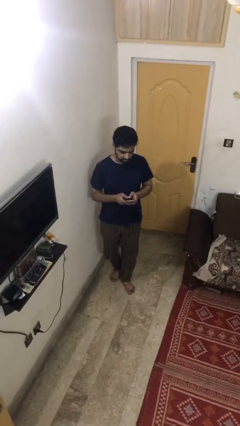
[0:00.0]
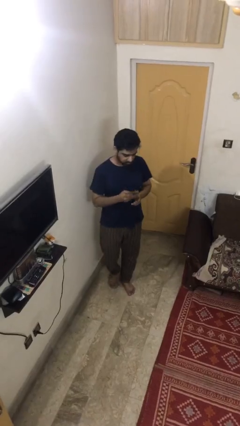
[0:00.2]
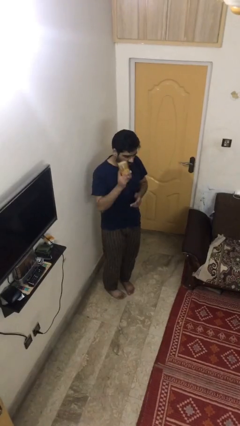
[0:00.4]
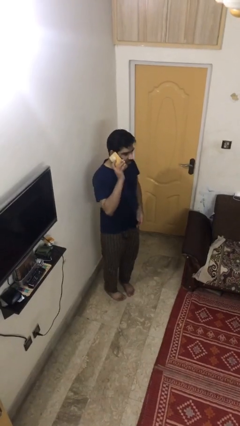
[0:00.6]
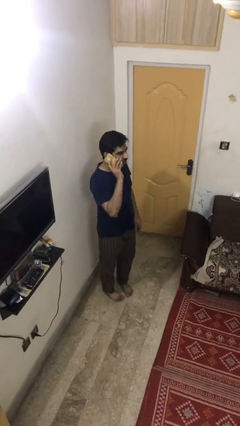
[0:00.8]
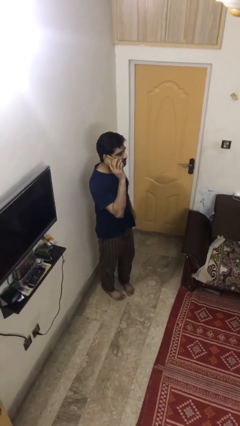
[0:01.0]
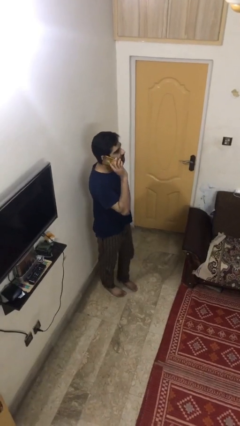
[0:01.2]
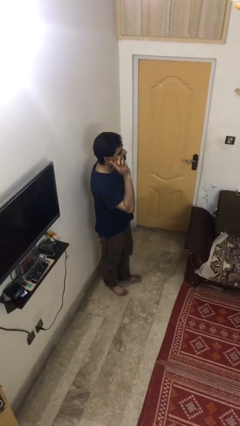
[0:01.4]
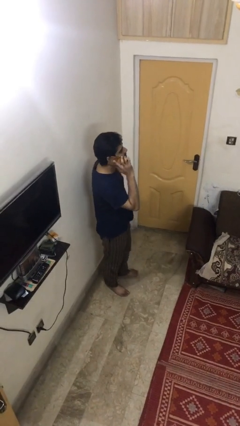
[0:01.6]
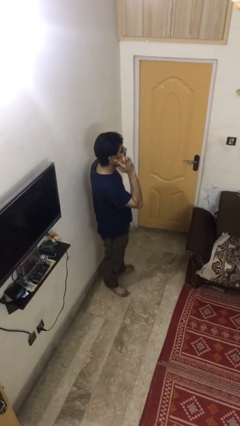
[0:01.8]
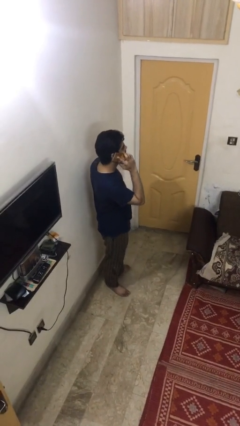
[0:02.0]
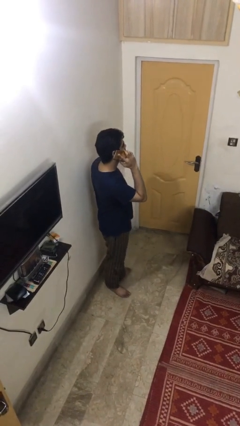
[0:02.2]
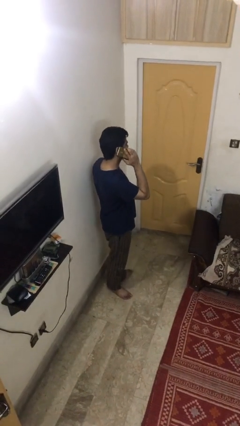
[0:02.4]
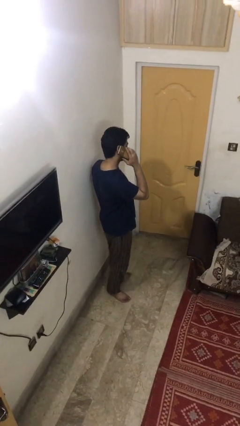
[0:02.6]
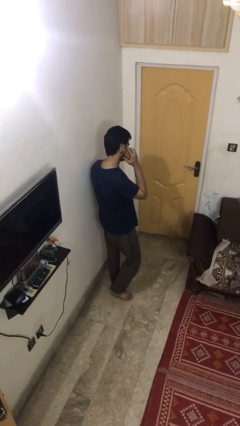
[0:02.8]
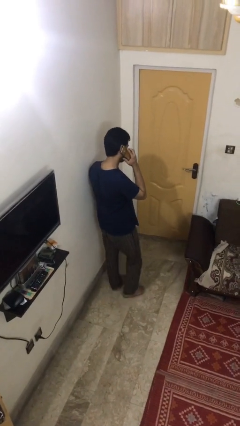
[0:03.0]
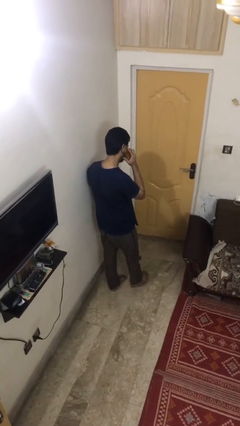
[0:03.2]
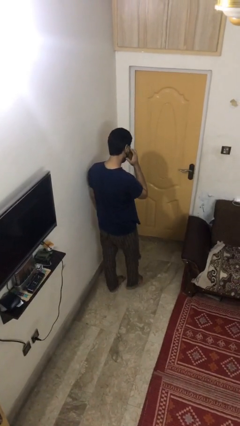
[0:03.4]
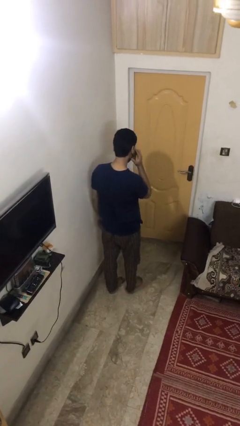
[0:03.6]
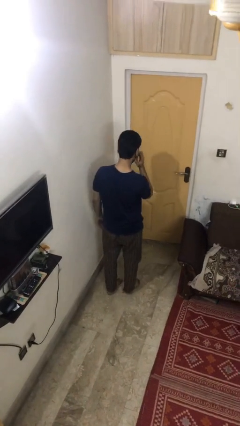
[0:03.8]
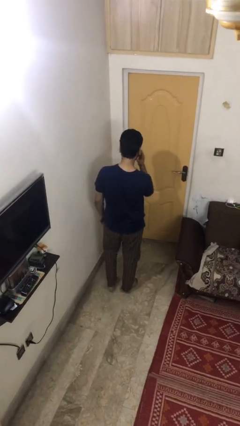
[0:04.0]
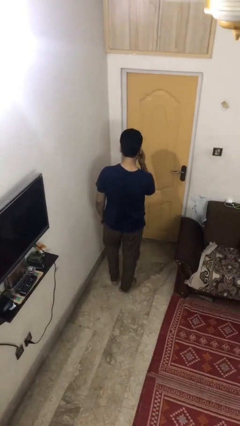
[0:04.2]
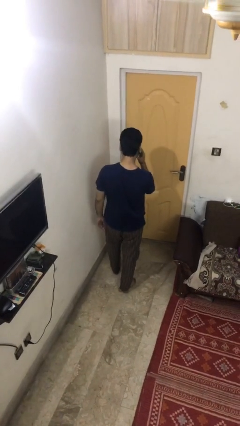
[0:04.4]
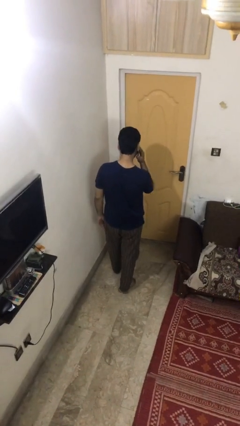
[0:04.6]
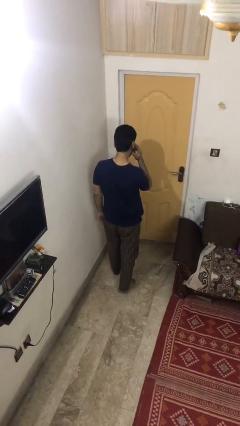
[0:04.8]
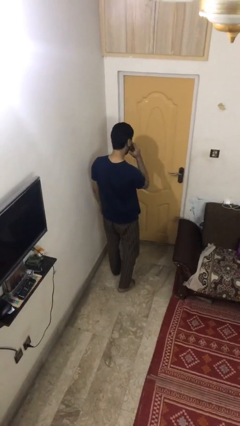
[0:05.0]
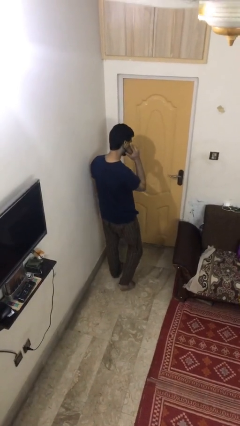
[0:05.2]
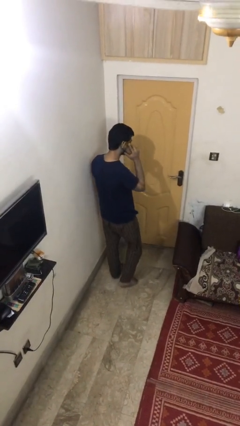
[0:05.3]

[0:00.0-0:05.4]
person talks on phone

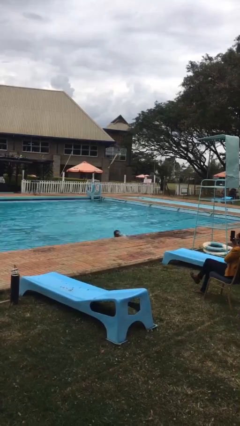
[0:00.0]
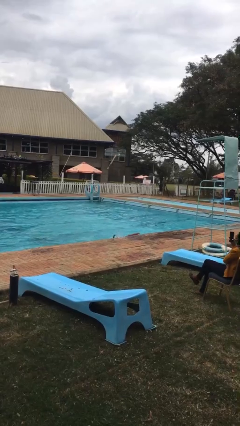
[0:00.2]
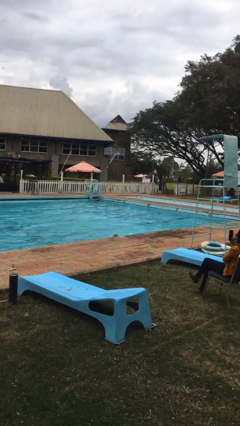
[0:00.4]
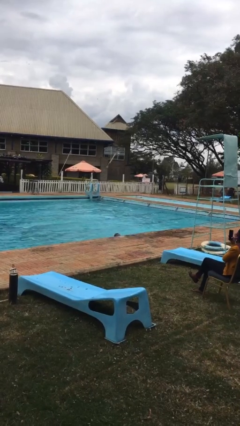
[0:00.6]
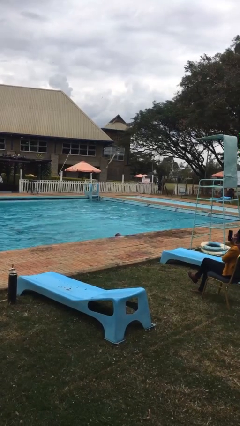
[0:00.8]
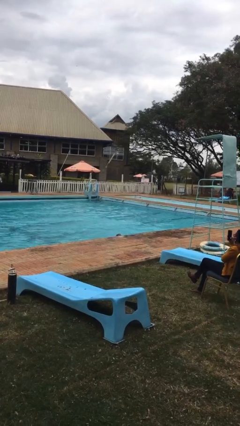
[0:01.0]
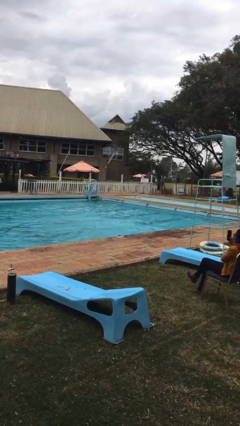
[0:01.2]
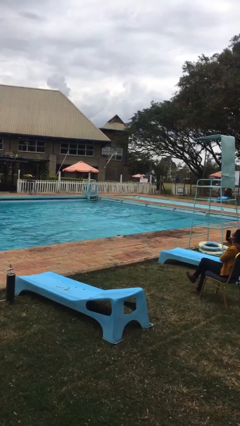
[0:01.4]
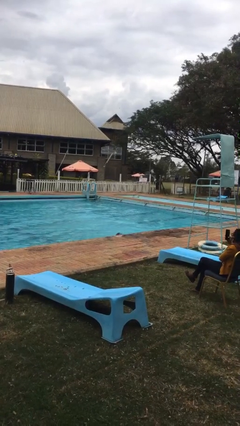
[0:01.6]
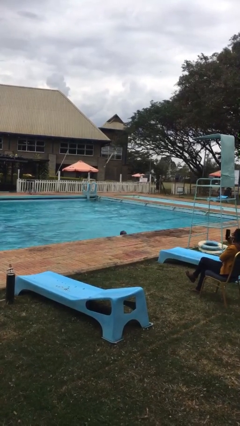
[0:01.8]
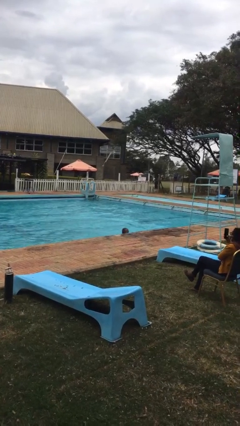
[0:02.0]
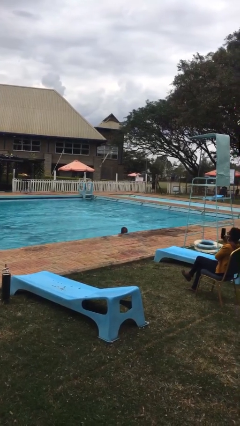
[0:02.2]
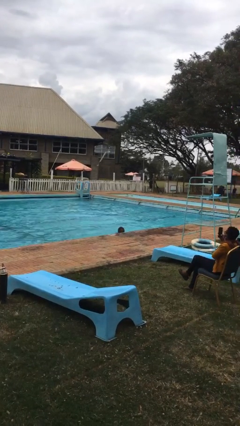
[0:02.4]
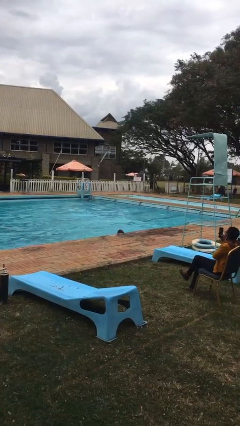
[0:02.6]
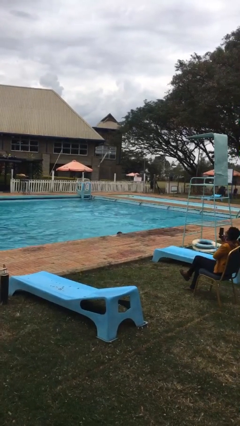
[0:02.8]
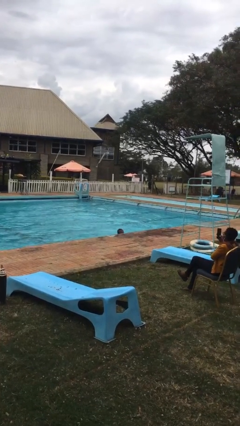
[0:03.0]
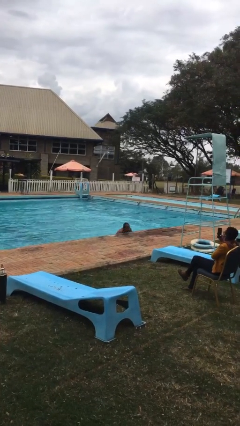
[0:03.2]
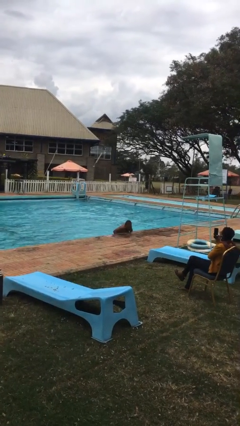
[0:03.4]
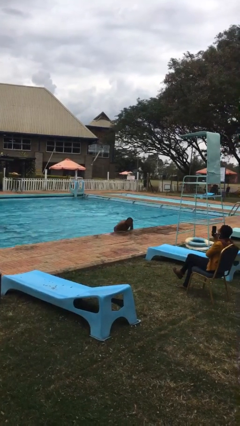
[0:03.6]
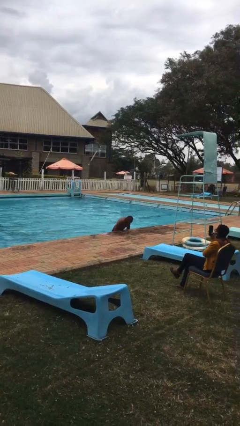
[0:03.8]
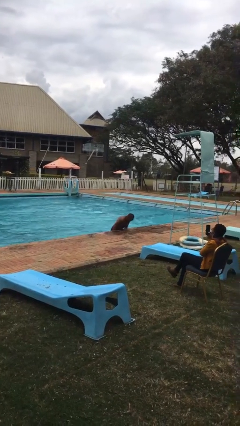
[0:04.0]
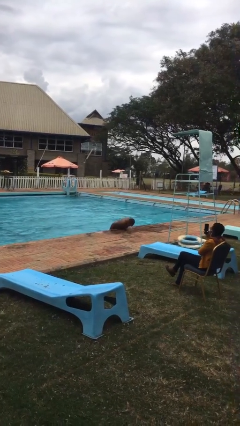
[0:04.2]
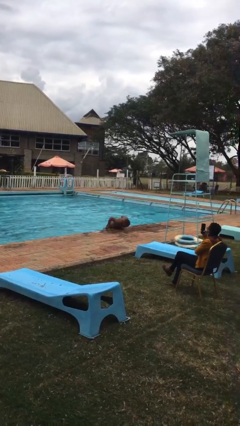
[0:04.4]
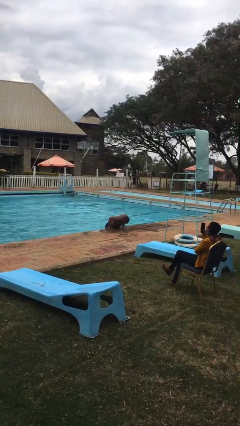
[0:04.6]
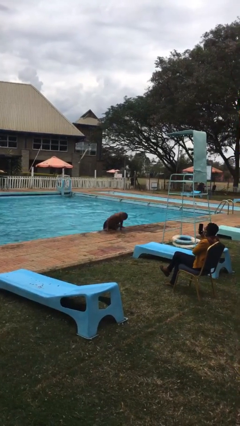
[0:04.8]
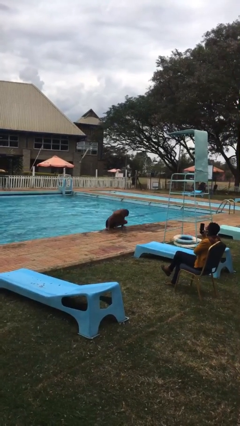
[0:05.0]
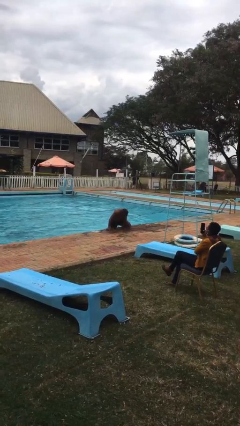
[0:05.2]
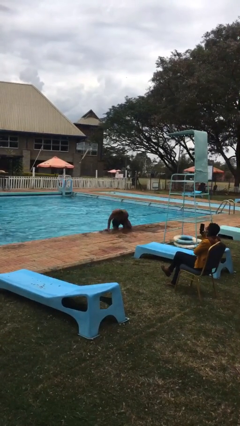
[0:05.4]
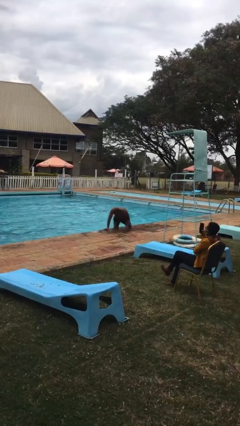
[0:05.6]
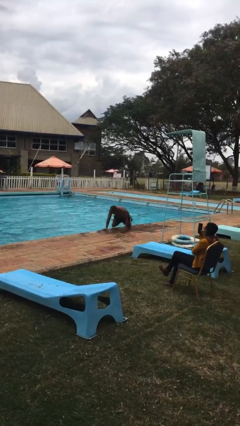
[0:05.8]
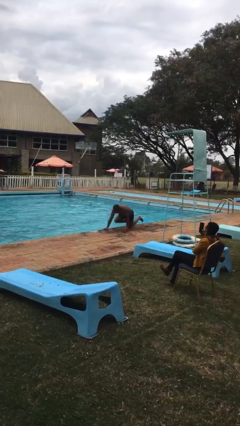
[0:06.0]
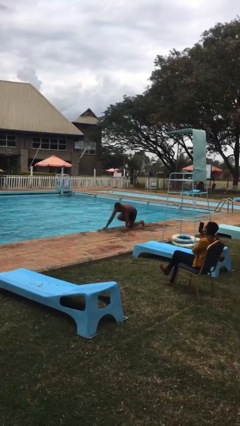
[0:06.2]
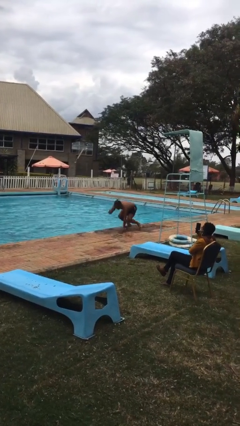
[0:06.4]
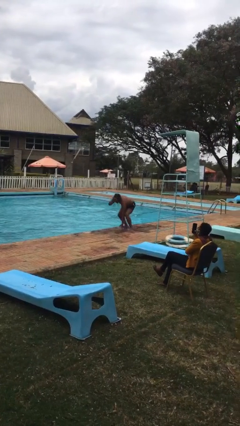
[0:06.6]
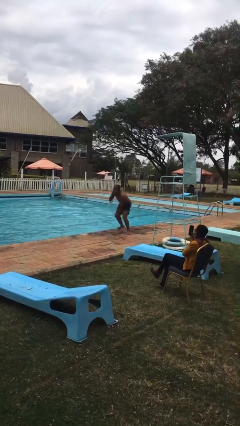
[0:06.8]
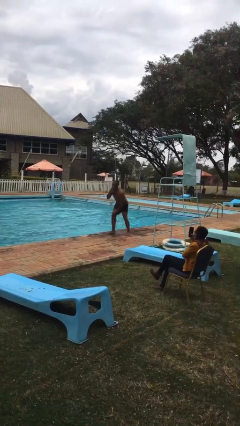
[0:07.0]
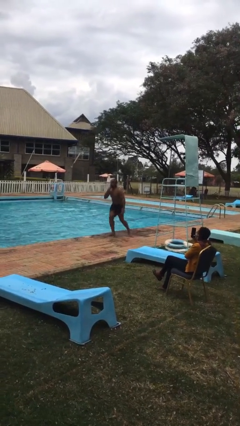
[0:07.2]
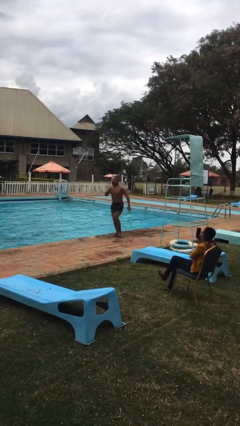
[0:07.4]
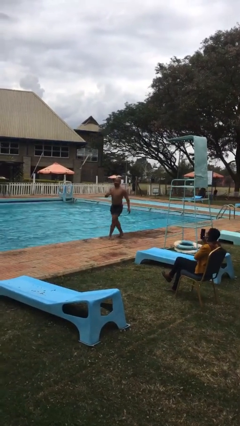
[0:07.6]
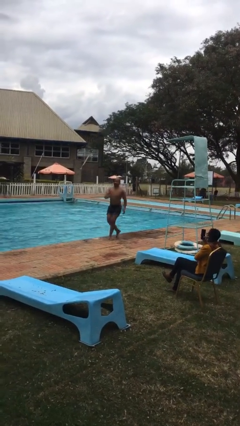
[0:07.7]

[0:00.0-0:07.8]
person exits pool

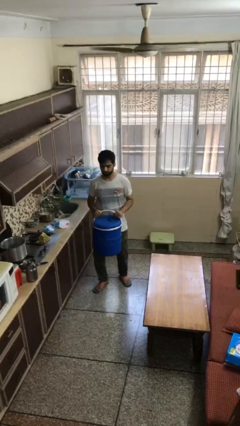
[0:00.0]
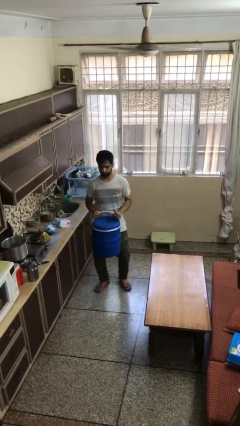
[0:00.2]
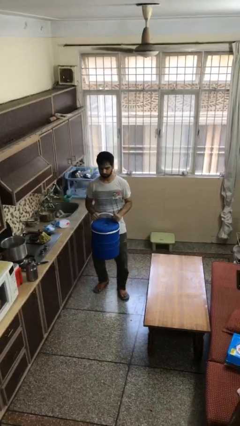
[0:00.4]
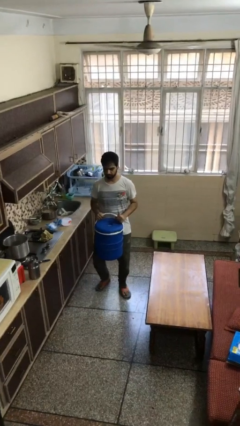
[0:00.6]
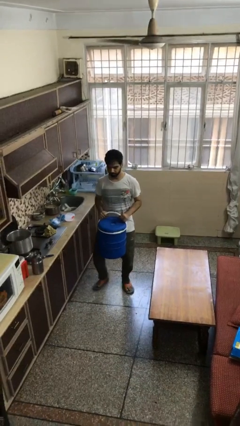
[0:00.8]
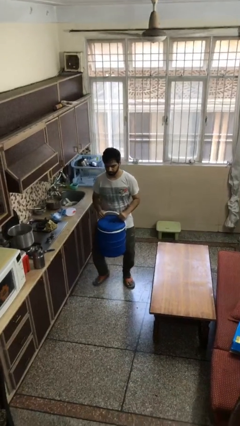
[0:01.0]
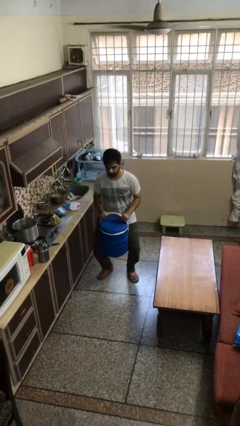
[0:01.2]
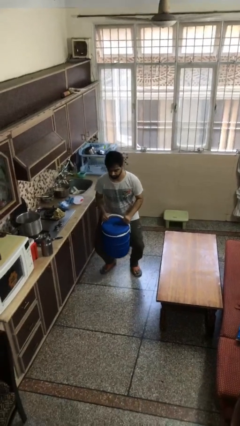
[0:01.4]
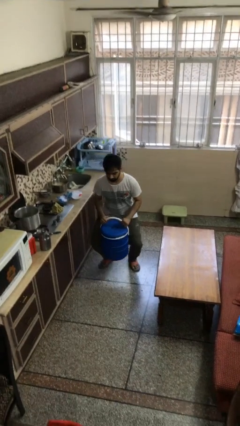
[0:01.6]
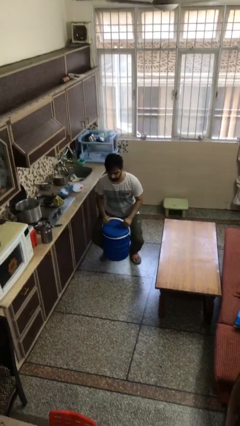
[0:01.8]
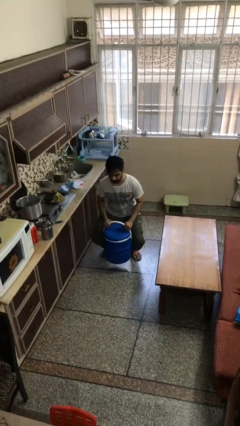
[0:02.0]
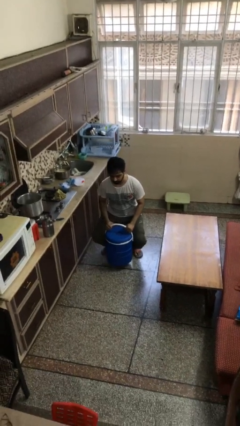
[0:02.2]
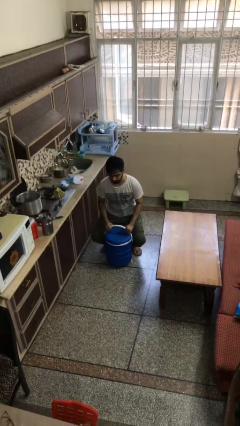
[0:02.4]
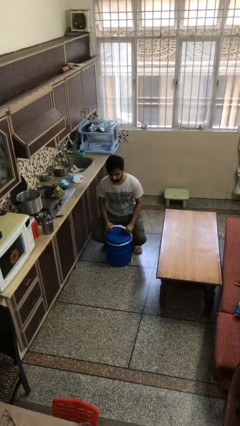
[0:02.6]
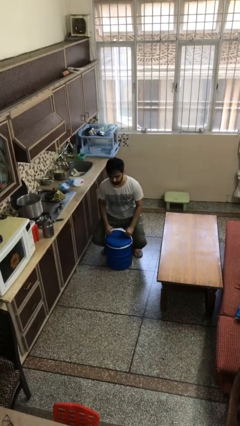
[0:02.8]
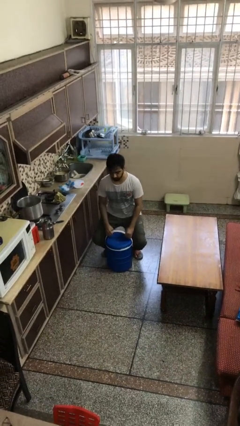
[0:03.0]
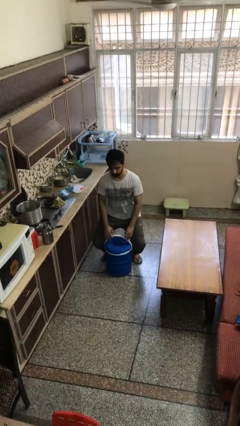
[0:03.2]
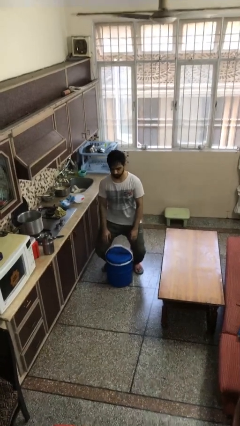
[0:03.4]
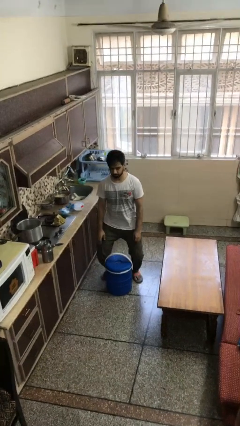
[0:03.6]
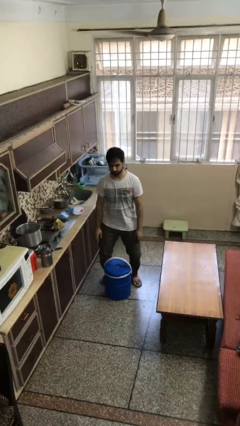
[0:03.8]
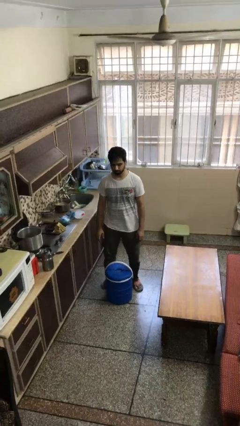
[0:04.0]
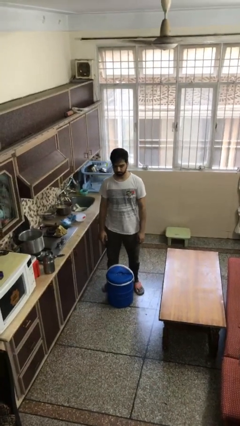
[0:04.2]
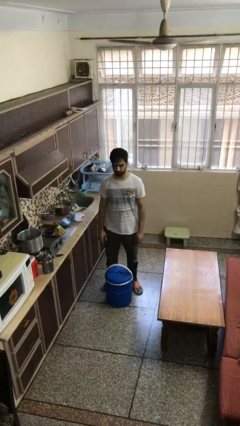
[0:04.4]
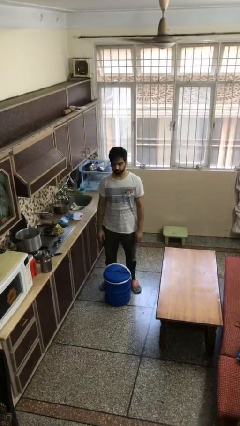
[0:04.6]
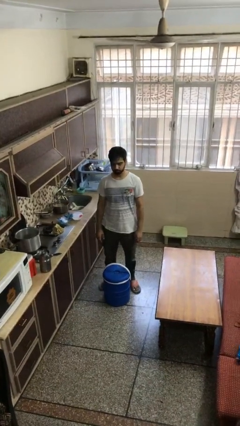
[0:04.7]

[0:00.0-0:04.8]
person puts down object on floor
